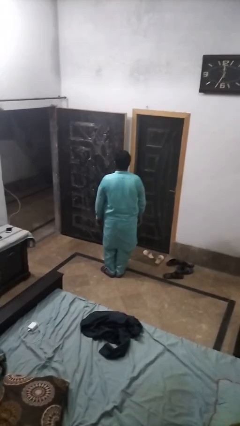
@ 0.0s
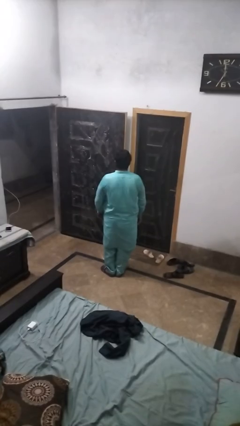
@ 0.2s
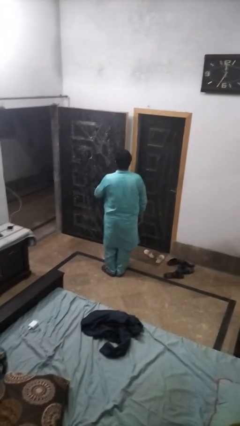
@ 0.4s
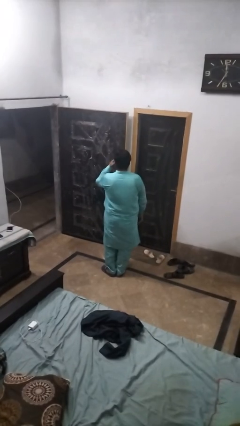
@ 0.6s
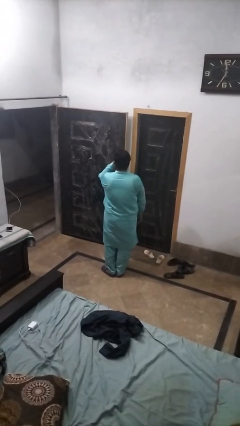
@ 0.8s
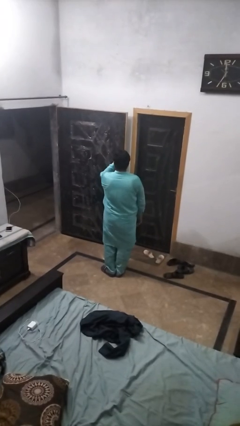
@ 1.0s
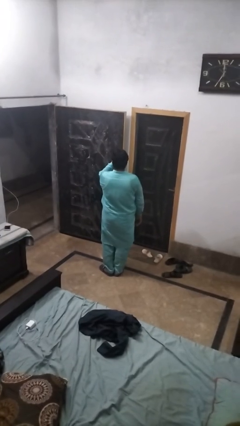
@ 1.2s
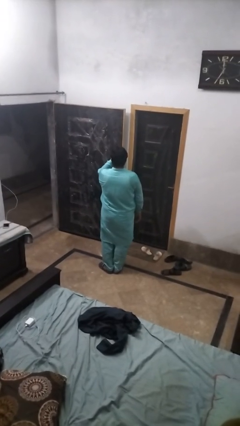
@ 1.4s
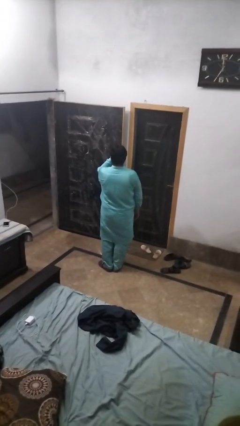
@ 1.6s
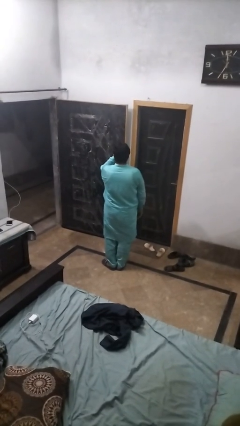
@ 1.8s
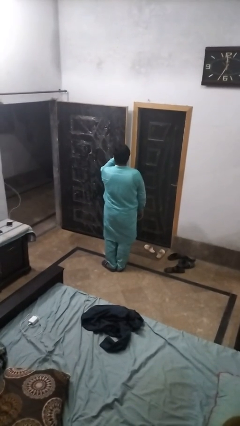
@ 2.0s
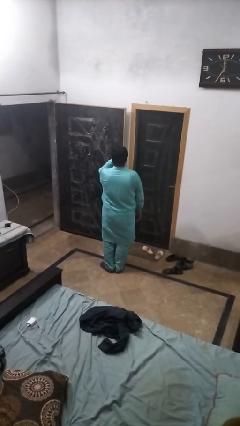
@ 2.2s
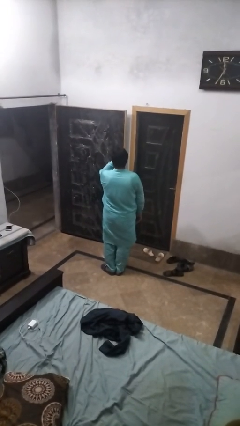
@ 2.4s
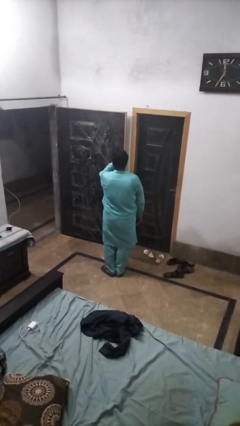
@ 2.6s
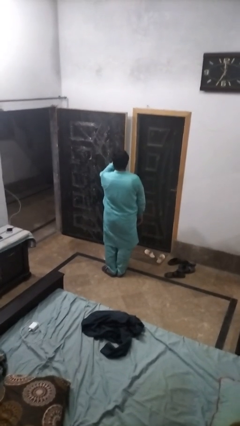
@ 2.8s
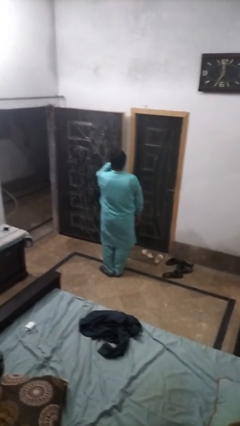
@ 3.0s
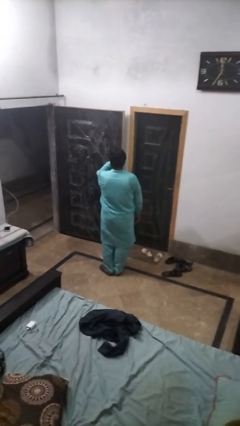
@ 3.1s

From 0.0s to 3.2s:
person licks fingers

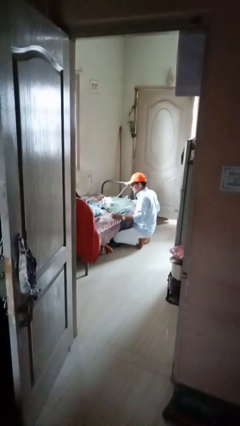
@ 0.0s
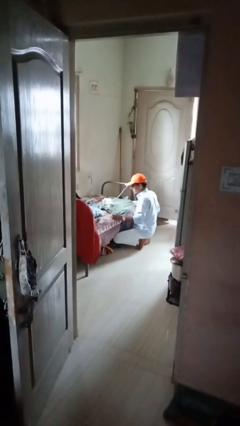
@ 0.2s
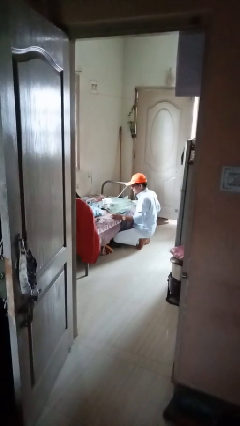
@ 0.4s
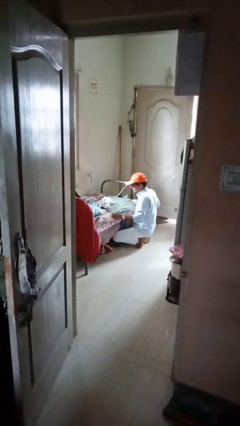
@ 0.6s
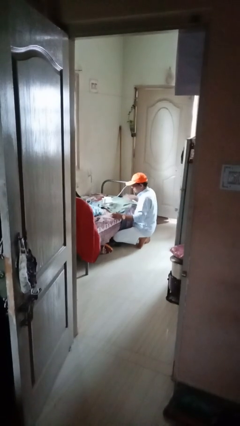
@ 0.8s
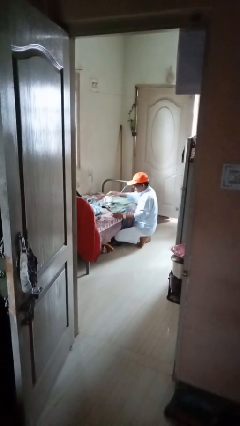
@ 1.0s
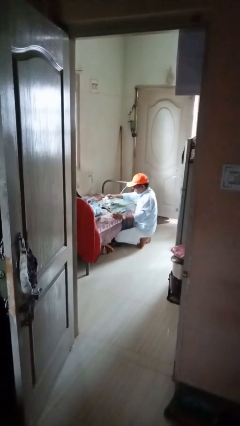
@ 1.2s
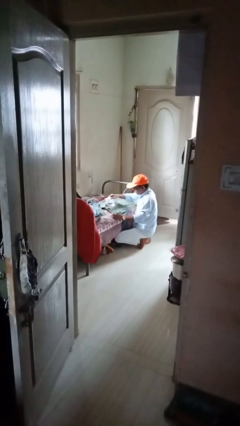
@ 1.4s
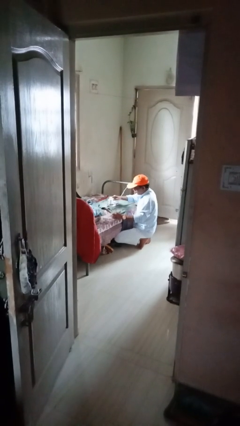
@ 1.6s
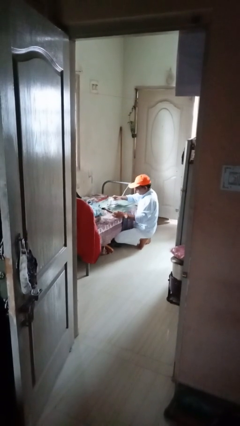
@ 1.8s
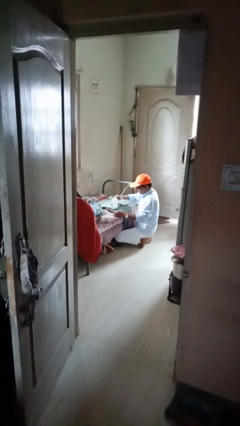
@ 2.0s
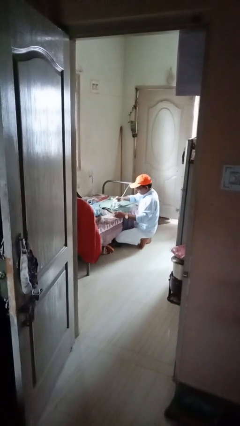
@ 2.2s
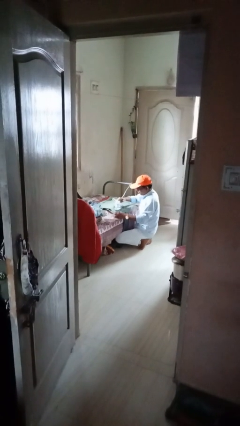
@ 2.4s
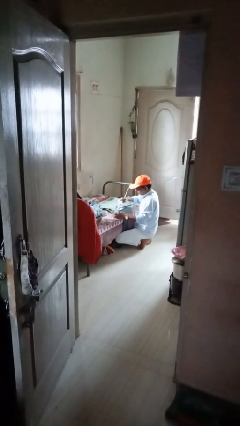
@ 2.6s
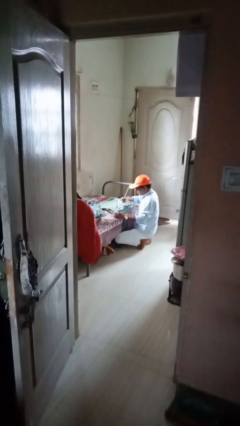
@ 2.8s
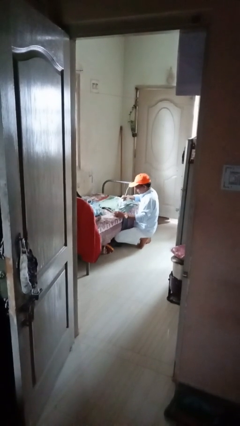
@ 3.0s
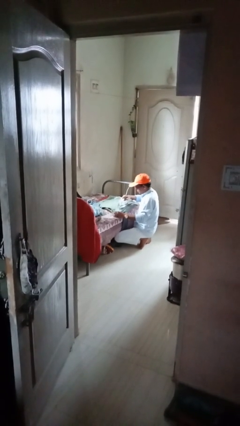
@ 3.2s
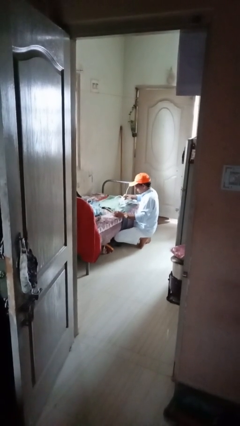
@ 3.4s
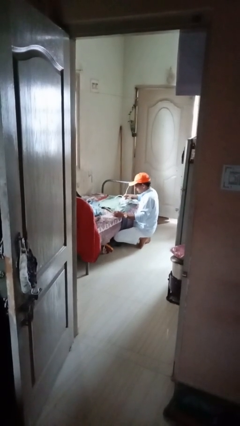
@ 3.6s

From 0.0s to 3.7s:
person irons clothes

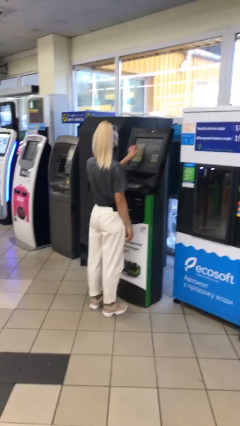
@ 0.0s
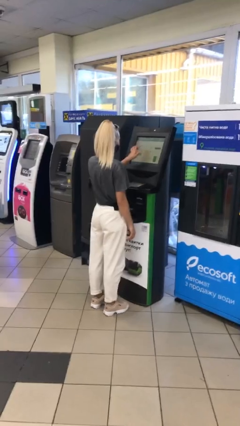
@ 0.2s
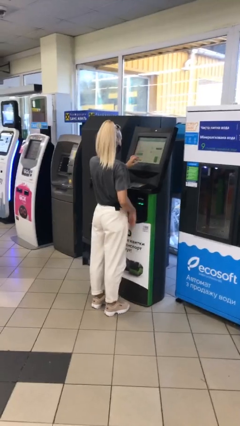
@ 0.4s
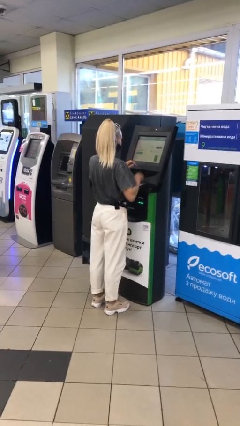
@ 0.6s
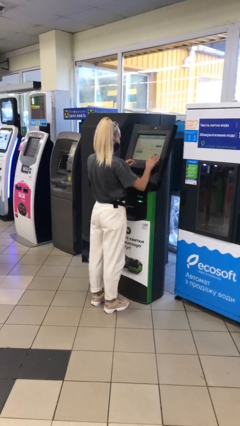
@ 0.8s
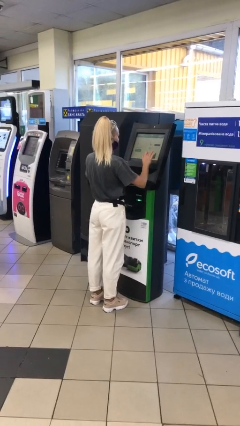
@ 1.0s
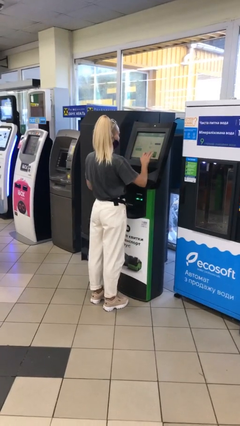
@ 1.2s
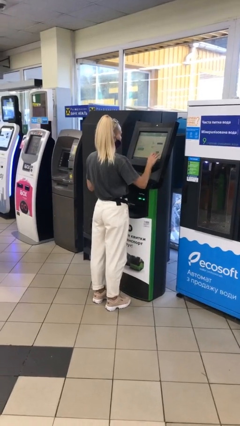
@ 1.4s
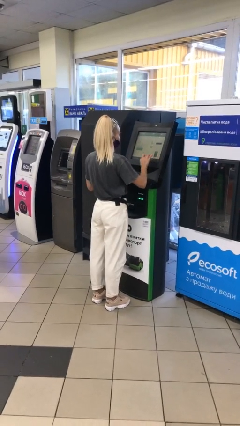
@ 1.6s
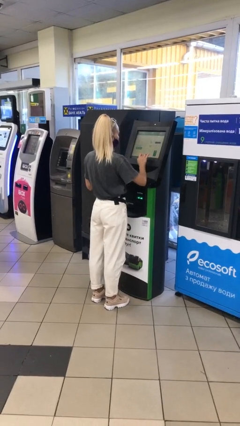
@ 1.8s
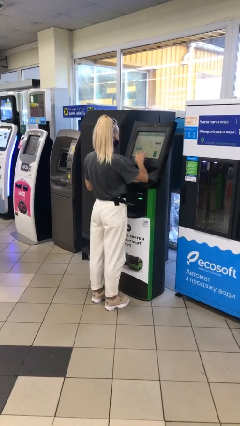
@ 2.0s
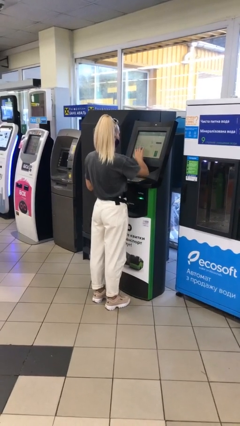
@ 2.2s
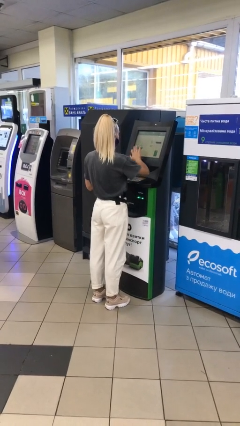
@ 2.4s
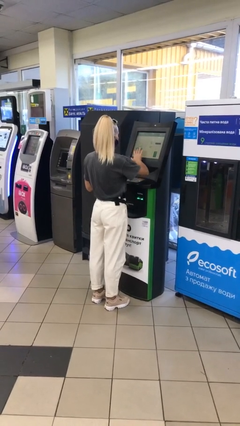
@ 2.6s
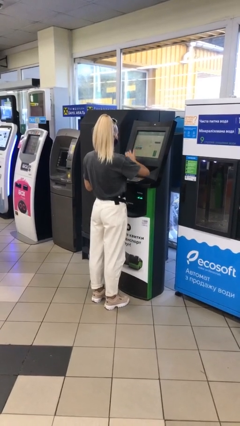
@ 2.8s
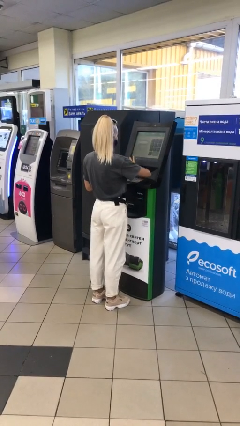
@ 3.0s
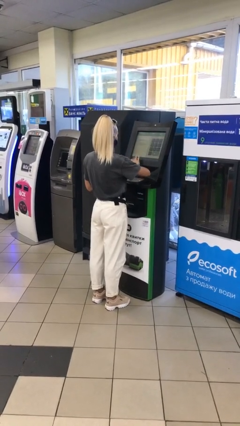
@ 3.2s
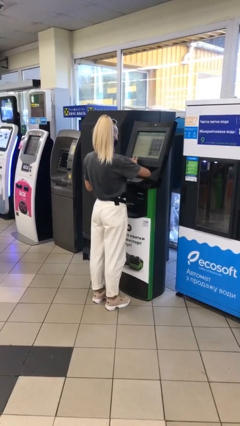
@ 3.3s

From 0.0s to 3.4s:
person purchases from machine

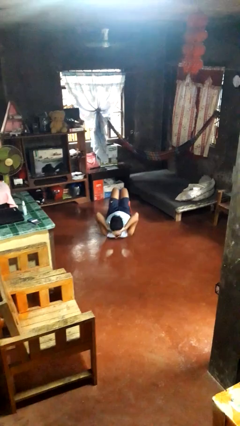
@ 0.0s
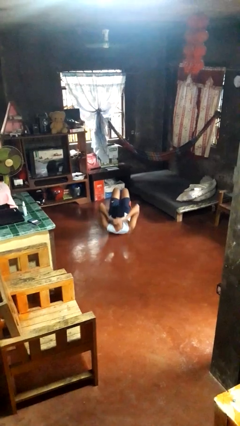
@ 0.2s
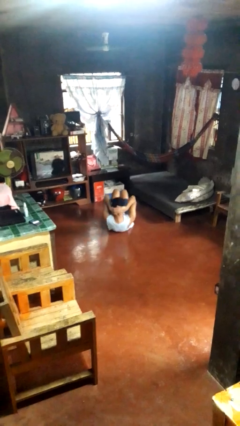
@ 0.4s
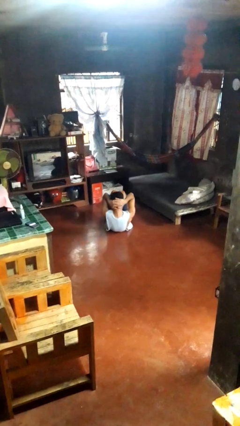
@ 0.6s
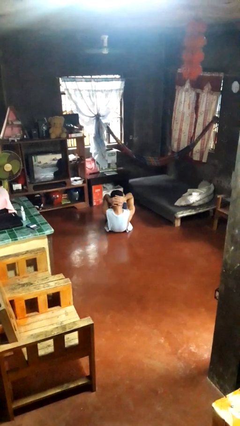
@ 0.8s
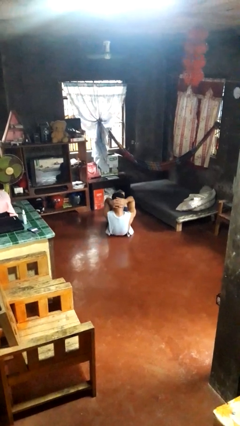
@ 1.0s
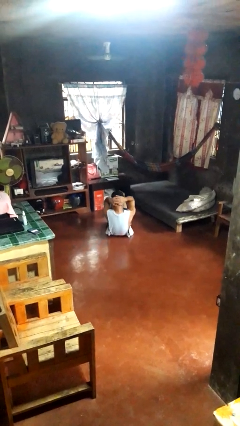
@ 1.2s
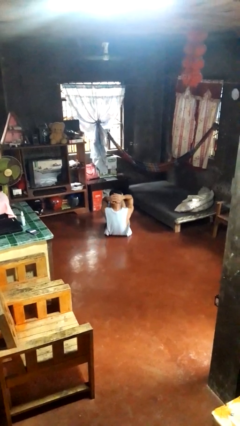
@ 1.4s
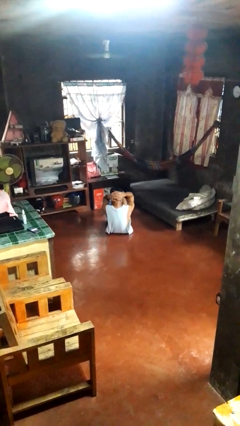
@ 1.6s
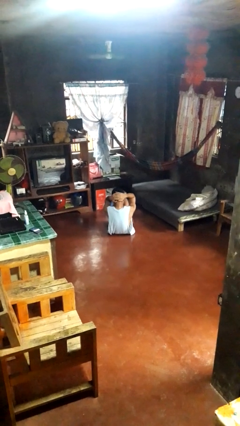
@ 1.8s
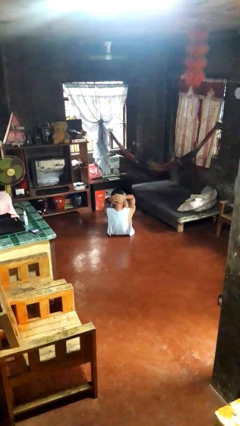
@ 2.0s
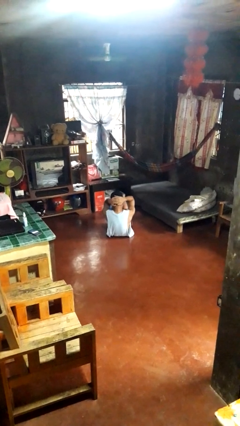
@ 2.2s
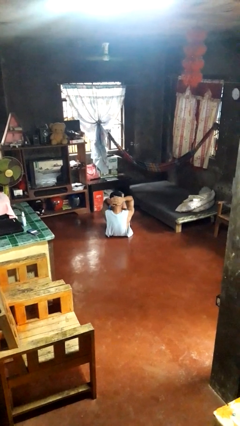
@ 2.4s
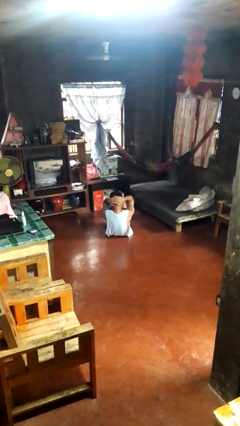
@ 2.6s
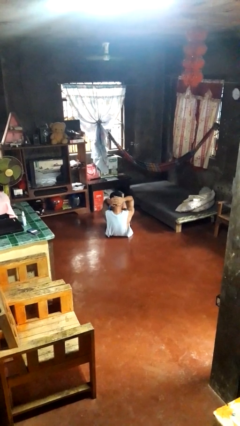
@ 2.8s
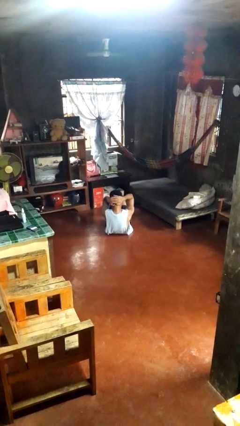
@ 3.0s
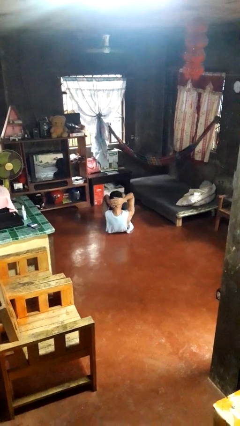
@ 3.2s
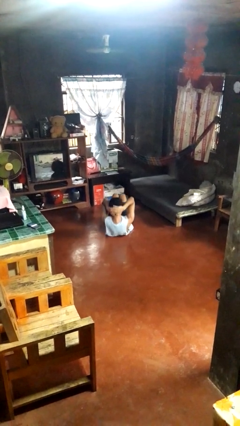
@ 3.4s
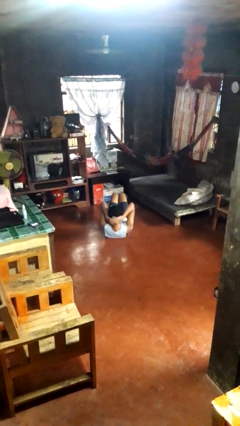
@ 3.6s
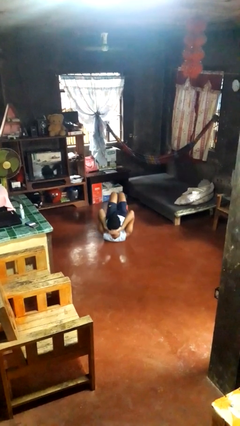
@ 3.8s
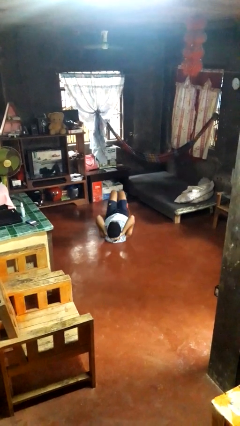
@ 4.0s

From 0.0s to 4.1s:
person exercises with situp

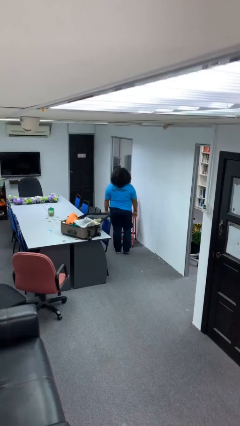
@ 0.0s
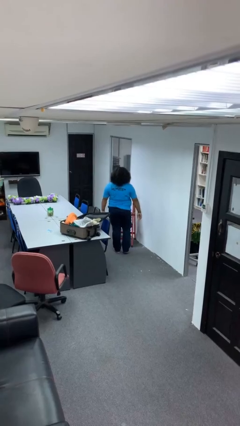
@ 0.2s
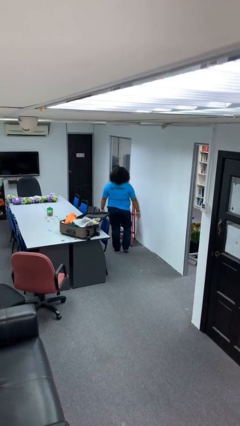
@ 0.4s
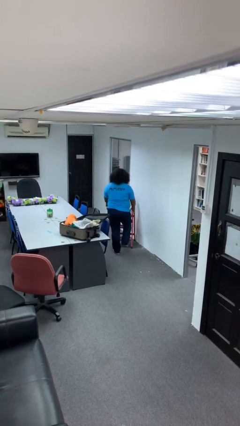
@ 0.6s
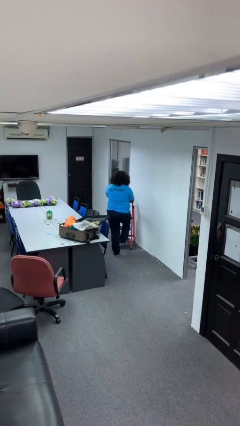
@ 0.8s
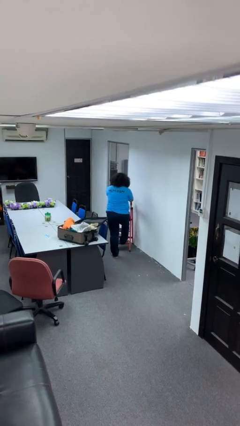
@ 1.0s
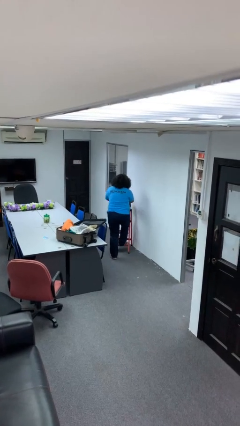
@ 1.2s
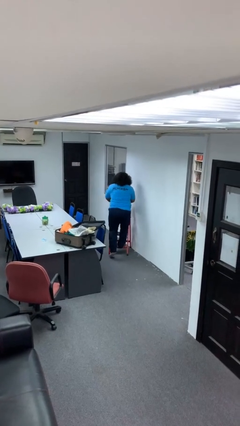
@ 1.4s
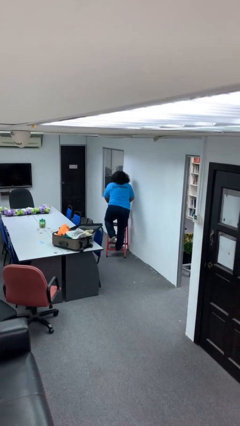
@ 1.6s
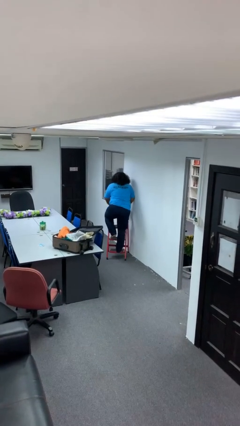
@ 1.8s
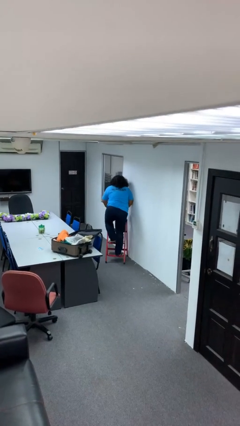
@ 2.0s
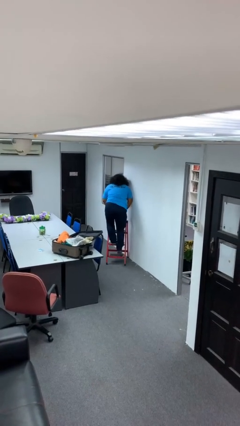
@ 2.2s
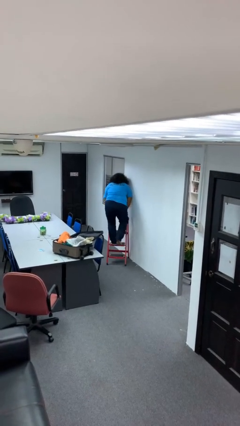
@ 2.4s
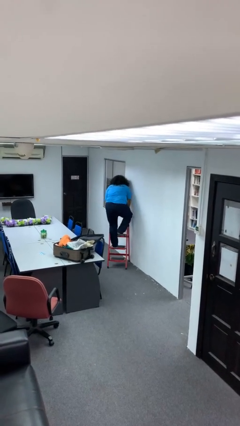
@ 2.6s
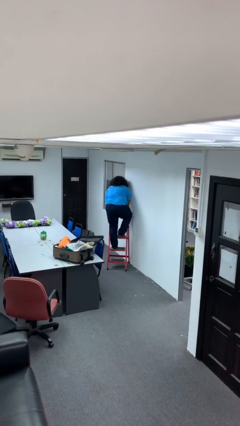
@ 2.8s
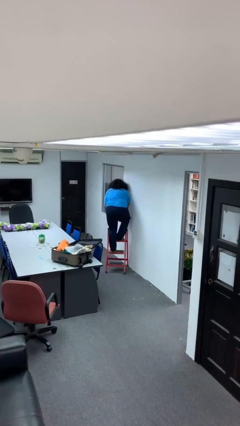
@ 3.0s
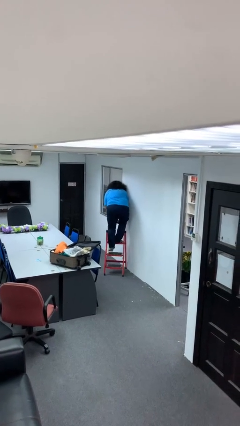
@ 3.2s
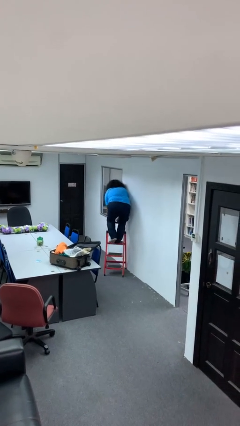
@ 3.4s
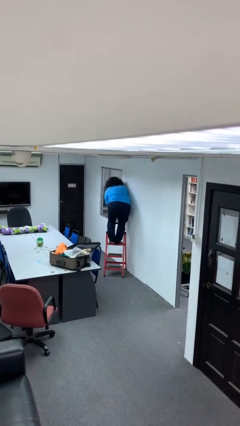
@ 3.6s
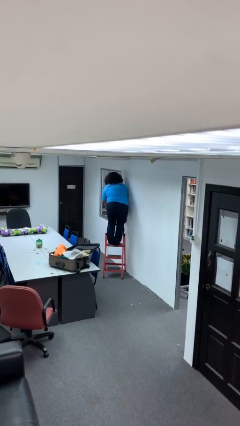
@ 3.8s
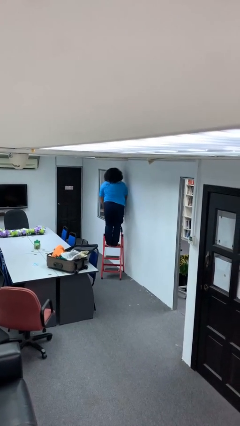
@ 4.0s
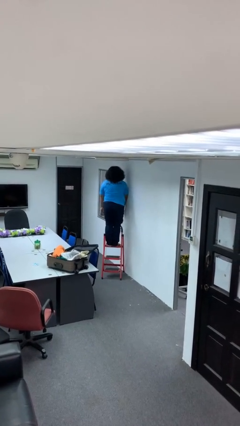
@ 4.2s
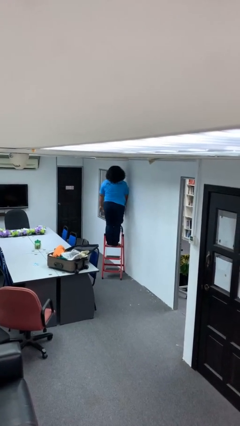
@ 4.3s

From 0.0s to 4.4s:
person climbs up ladder
